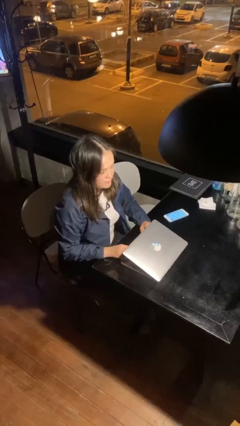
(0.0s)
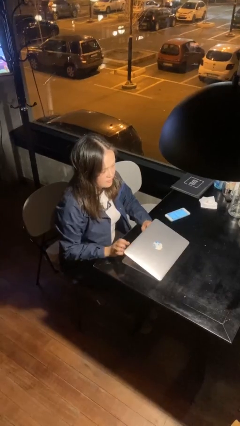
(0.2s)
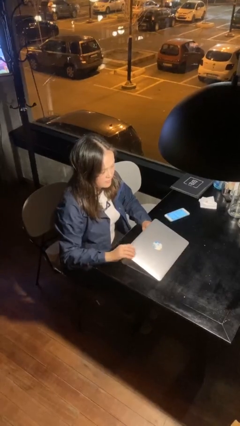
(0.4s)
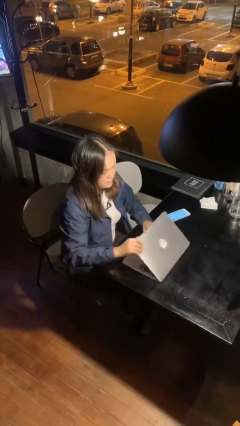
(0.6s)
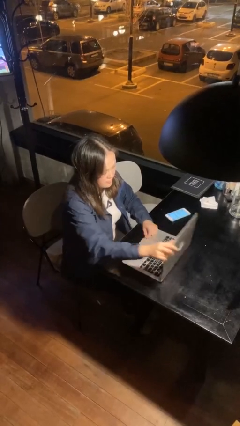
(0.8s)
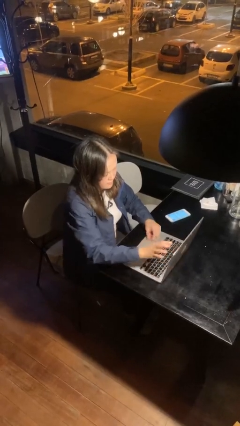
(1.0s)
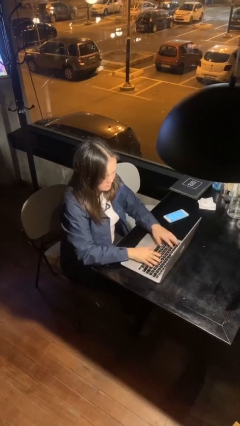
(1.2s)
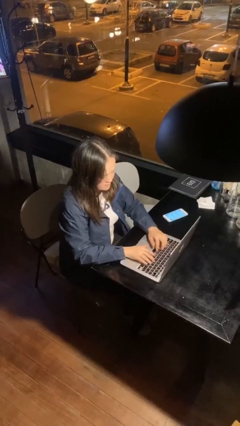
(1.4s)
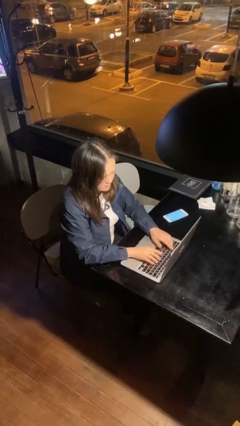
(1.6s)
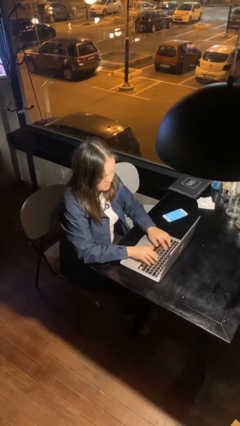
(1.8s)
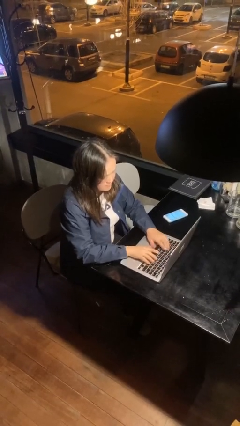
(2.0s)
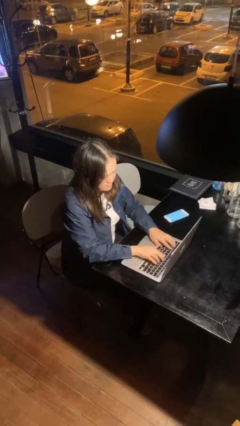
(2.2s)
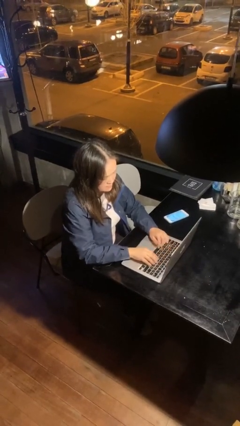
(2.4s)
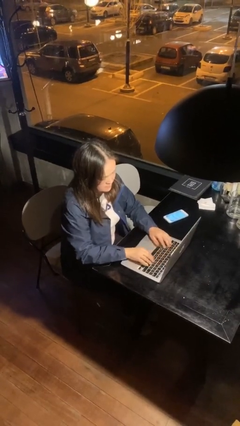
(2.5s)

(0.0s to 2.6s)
person interacts with laptop

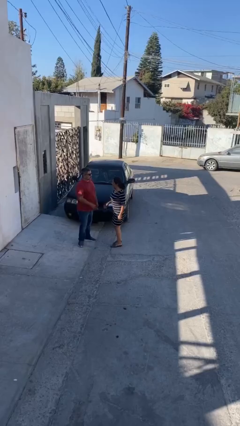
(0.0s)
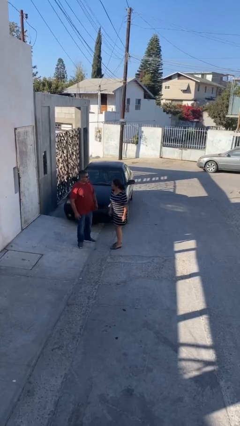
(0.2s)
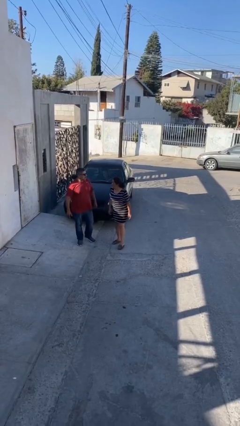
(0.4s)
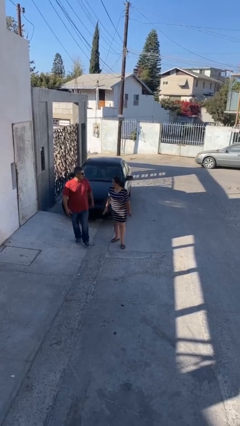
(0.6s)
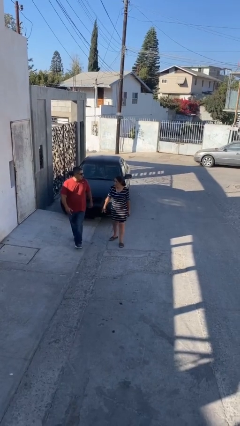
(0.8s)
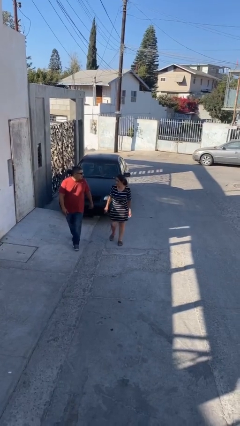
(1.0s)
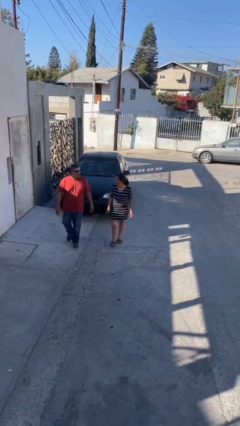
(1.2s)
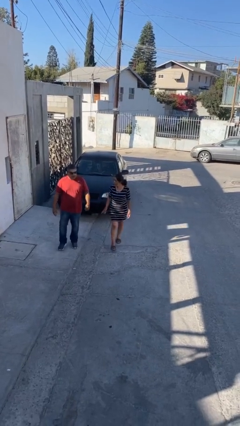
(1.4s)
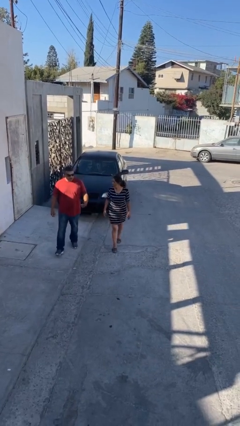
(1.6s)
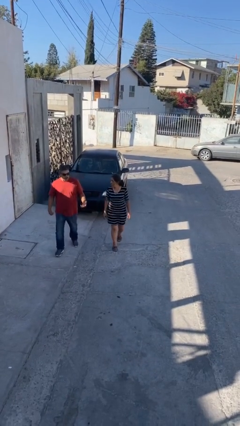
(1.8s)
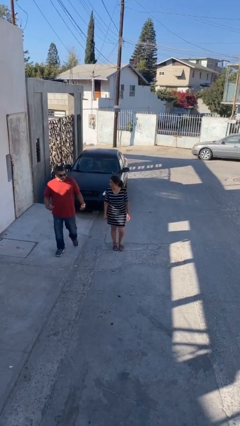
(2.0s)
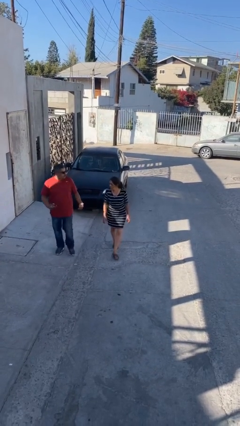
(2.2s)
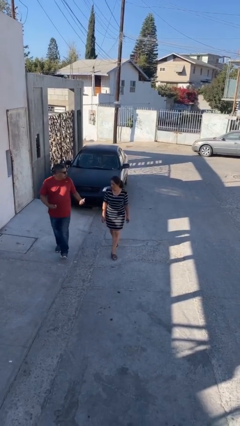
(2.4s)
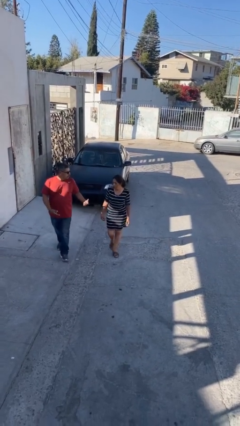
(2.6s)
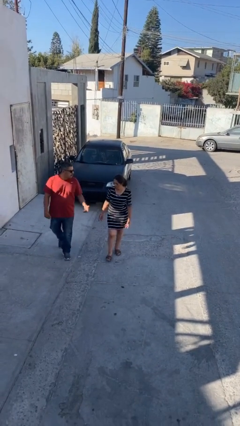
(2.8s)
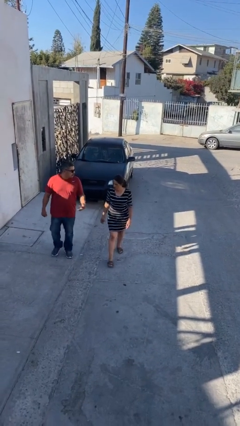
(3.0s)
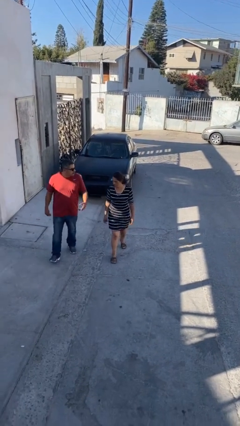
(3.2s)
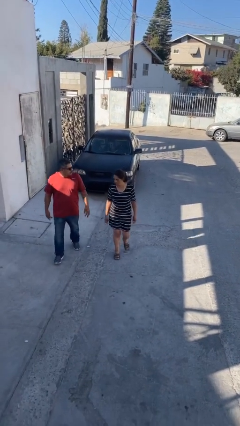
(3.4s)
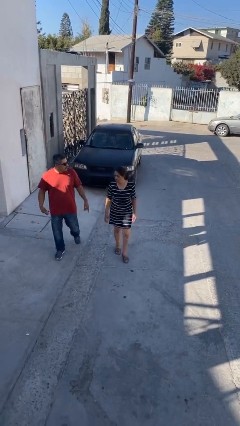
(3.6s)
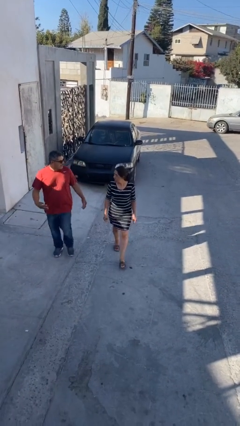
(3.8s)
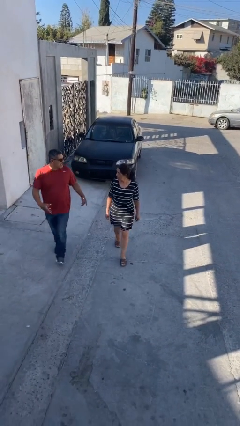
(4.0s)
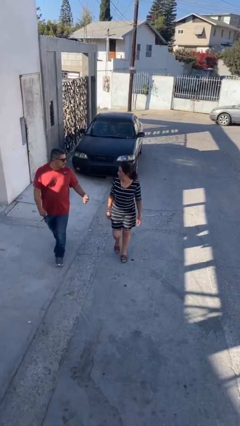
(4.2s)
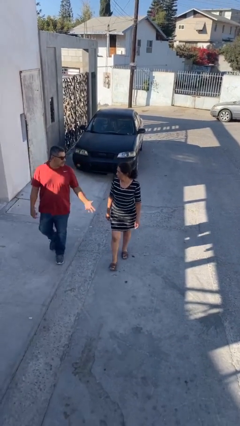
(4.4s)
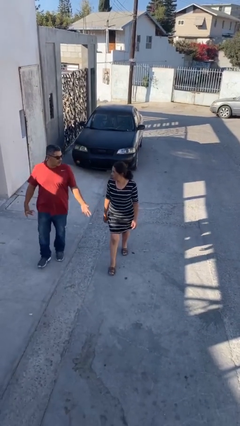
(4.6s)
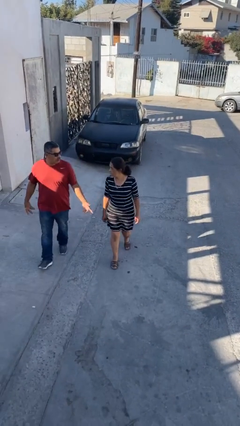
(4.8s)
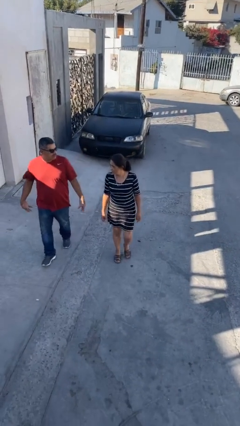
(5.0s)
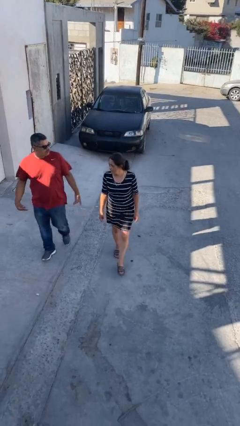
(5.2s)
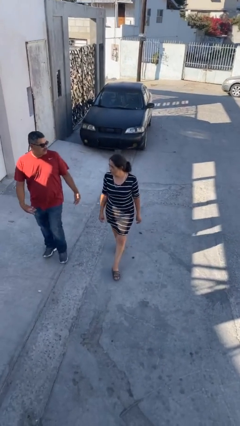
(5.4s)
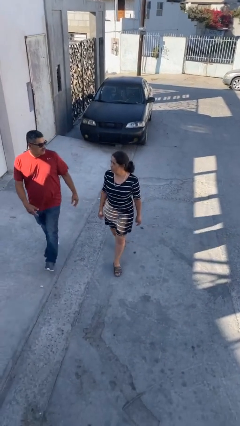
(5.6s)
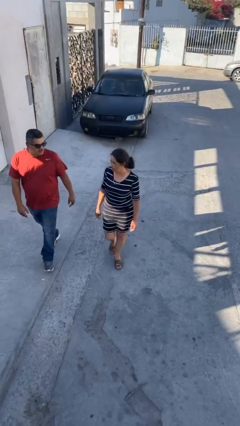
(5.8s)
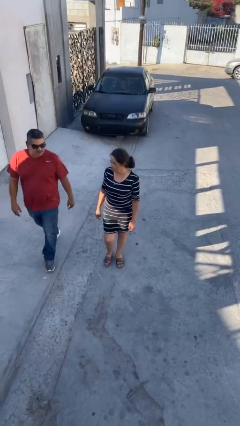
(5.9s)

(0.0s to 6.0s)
person talks to person

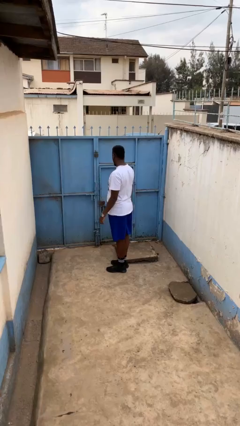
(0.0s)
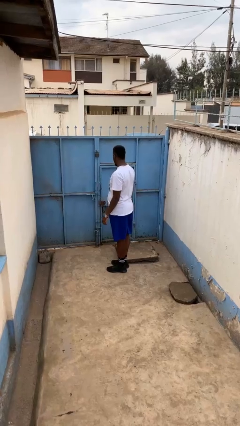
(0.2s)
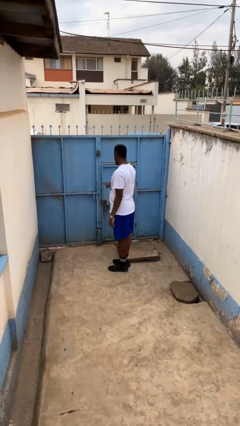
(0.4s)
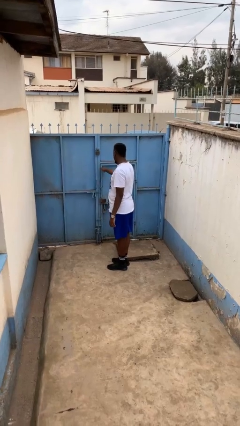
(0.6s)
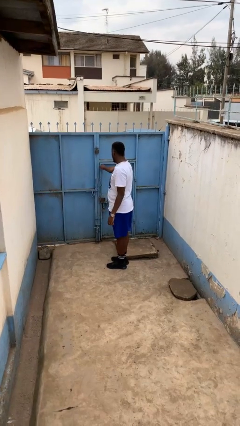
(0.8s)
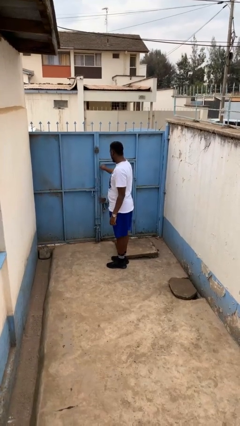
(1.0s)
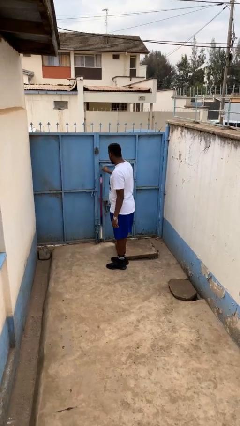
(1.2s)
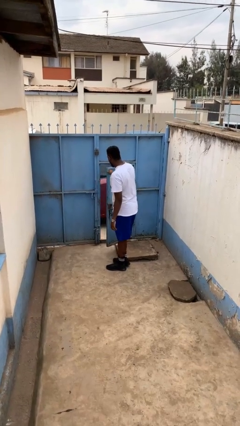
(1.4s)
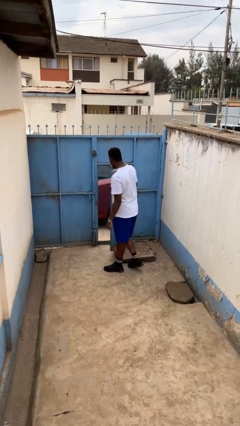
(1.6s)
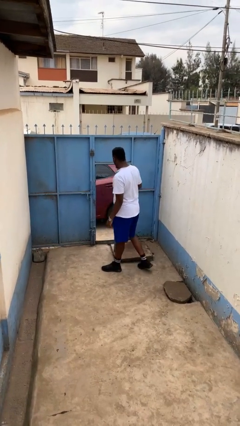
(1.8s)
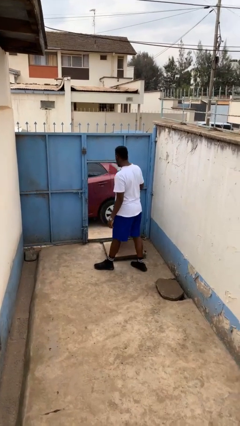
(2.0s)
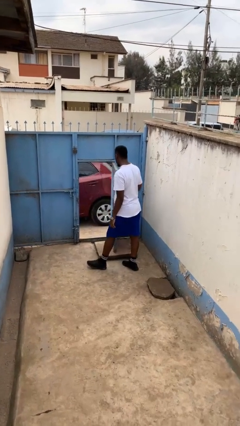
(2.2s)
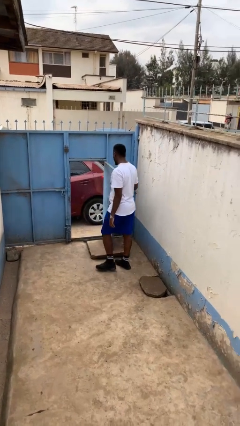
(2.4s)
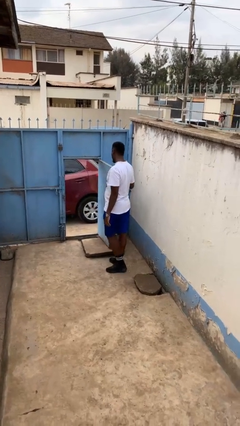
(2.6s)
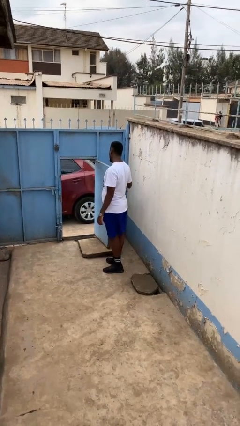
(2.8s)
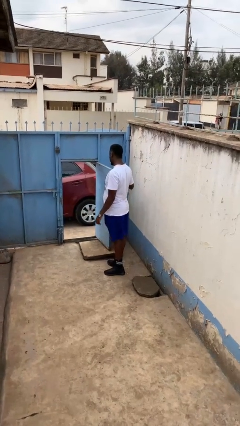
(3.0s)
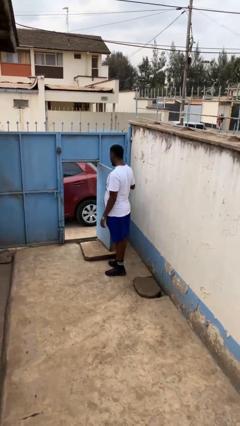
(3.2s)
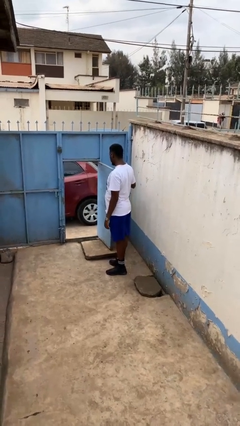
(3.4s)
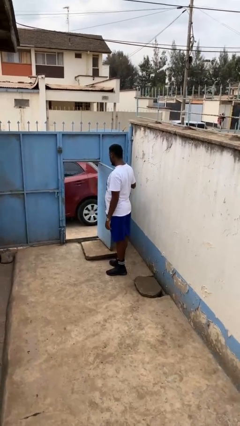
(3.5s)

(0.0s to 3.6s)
person opens gate

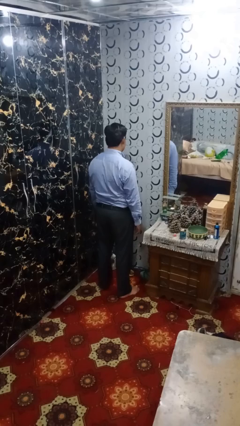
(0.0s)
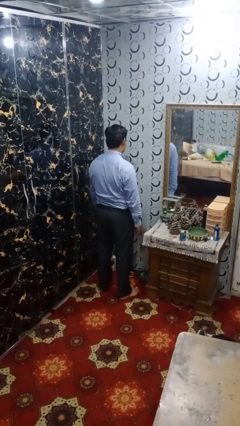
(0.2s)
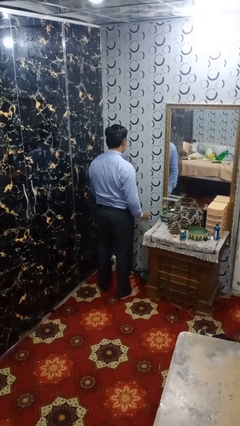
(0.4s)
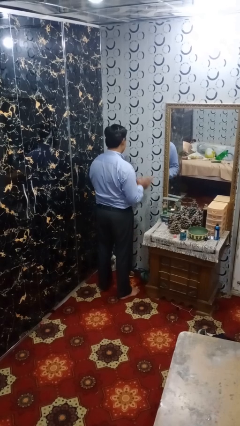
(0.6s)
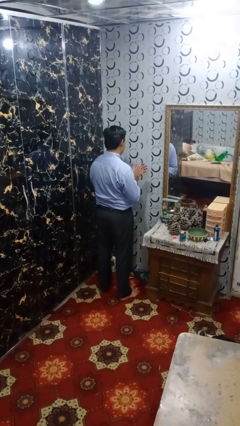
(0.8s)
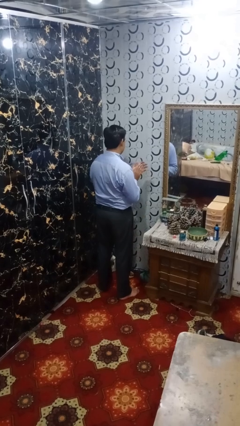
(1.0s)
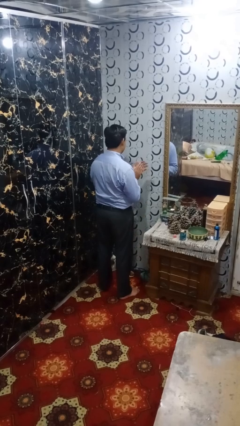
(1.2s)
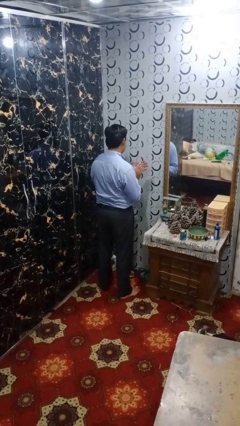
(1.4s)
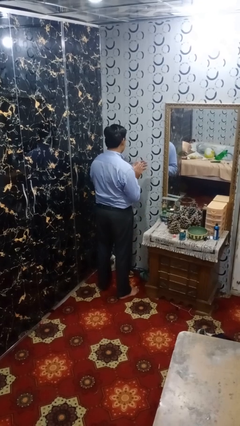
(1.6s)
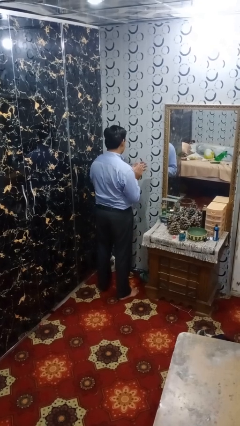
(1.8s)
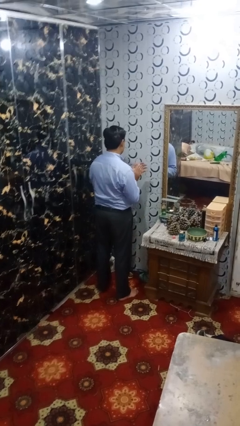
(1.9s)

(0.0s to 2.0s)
person claps hands

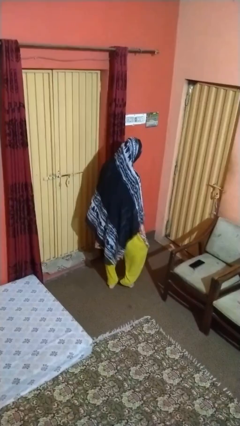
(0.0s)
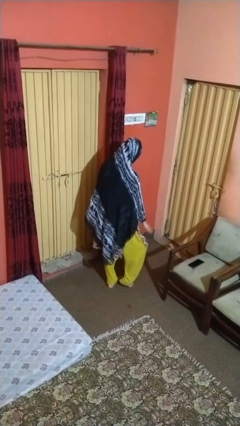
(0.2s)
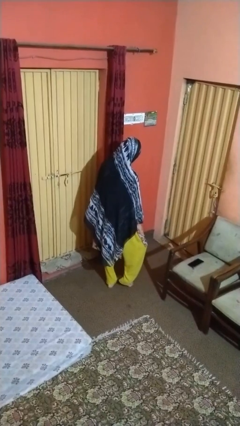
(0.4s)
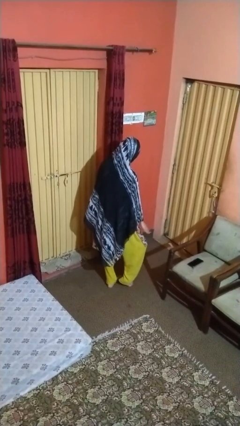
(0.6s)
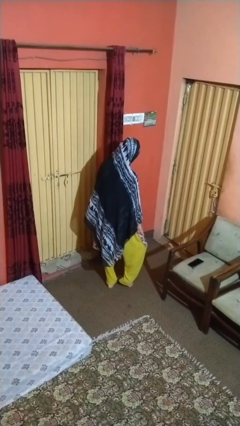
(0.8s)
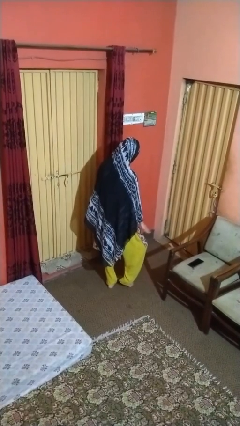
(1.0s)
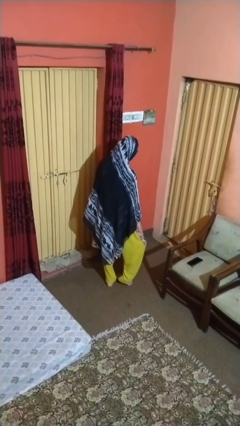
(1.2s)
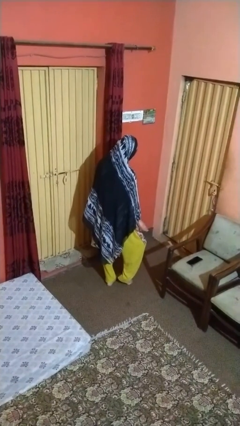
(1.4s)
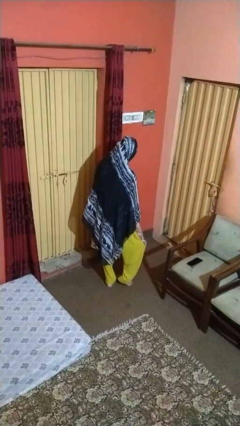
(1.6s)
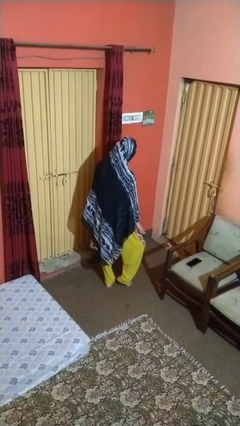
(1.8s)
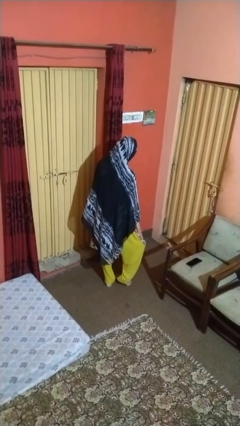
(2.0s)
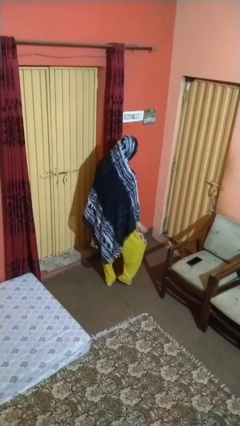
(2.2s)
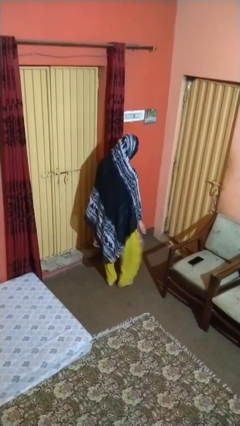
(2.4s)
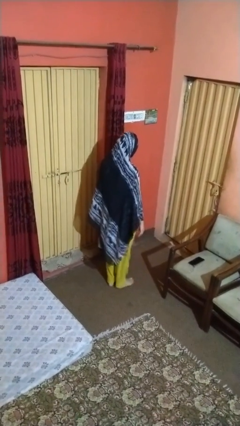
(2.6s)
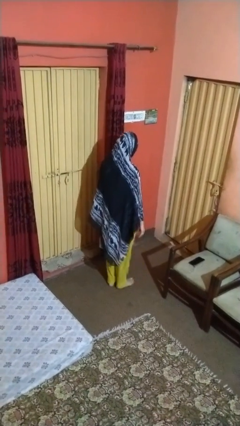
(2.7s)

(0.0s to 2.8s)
person slaps hands on thighs

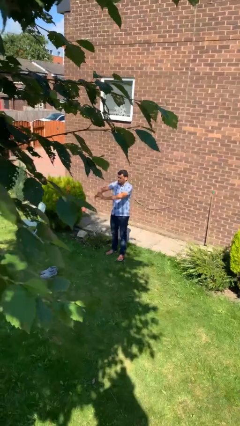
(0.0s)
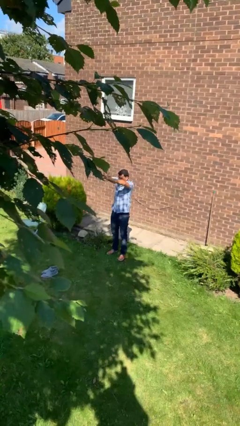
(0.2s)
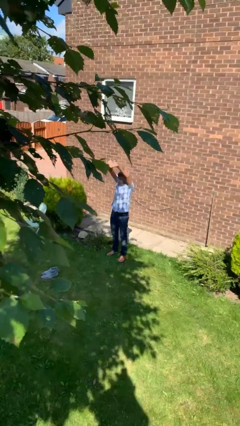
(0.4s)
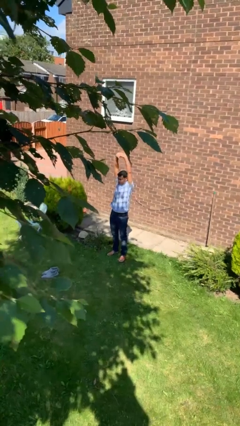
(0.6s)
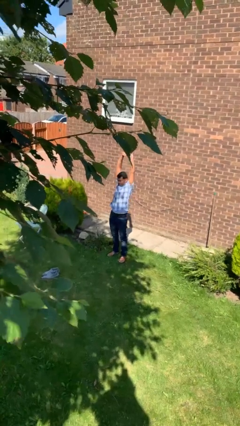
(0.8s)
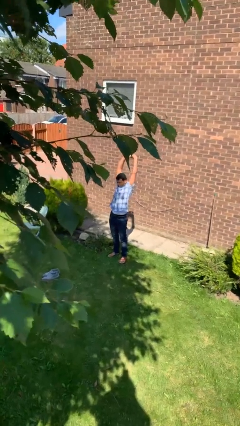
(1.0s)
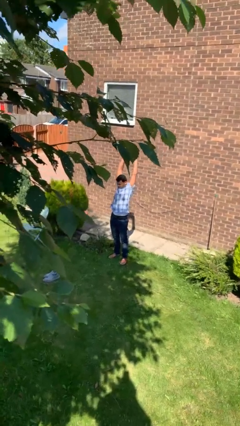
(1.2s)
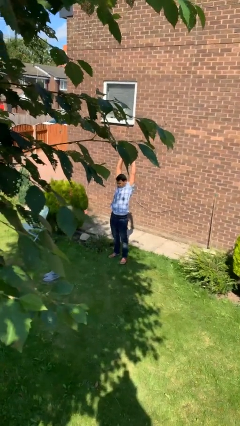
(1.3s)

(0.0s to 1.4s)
person stretches arms over head
